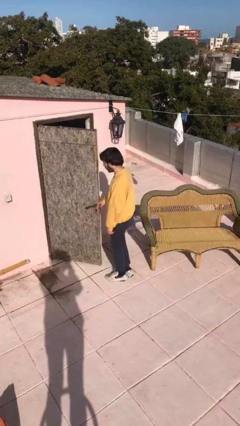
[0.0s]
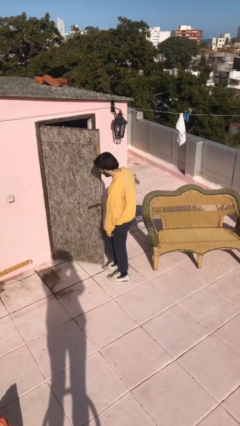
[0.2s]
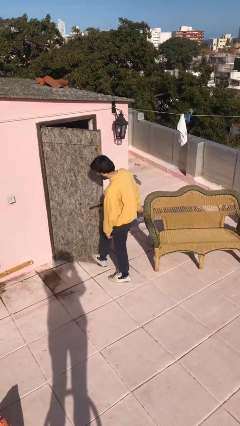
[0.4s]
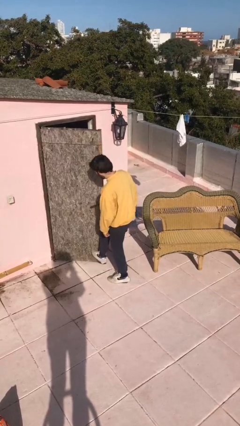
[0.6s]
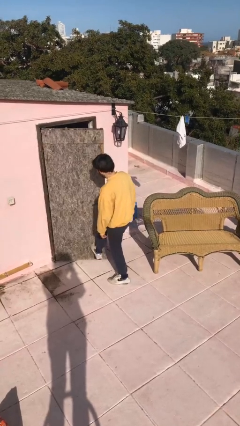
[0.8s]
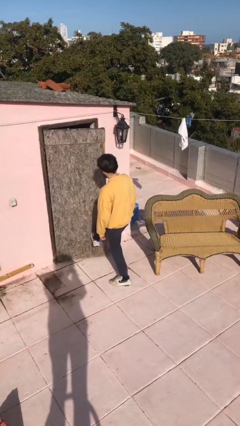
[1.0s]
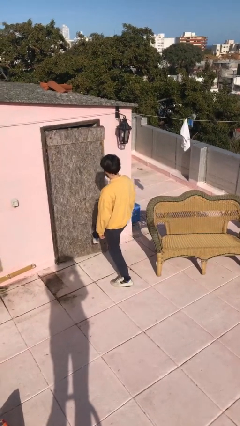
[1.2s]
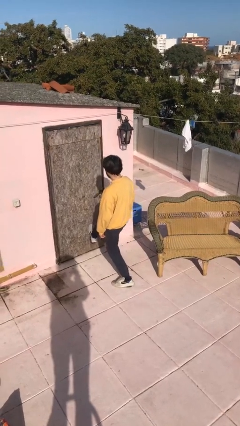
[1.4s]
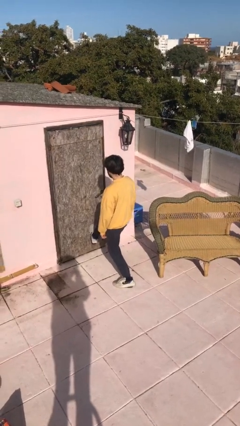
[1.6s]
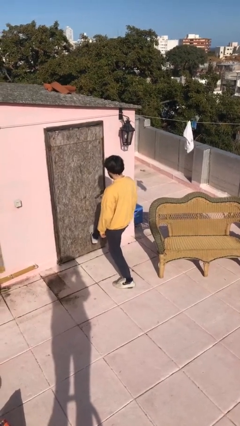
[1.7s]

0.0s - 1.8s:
person closes door with foot

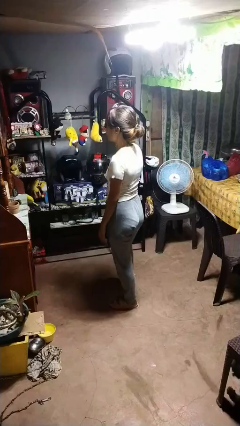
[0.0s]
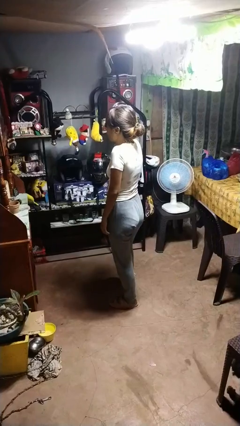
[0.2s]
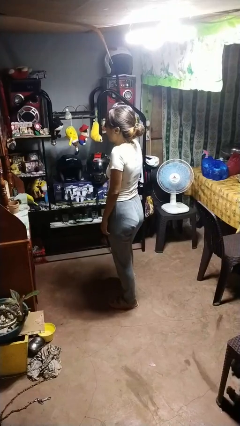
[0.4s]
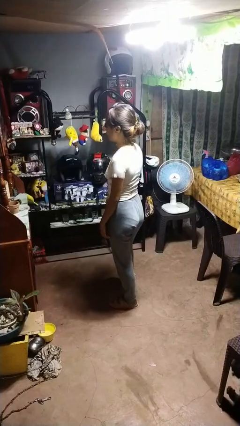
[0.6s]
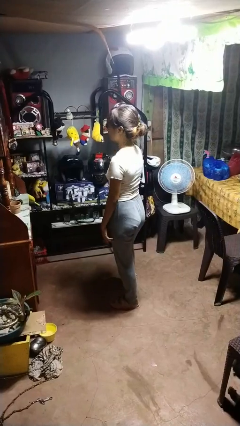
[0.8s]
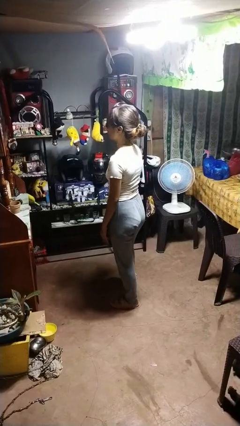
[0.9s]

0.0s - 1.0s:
person shrugs

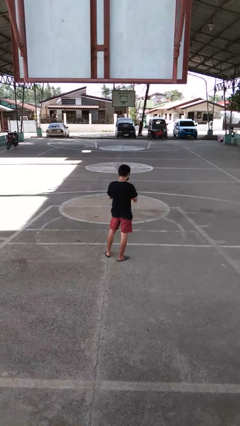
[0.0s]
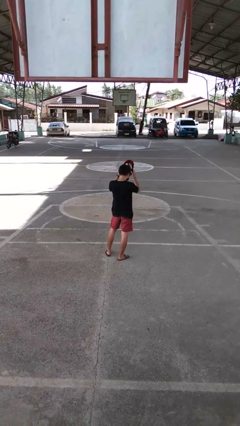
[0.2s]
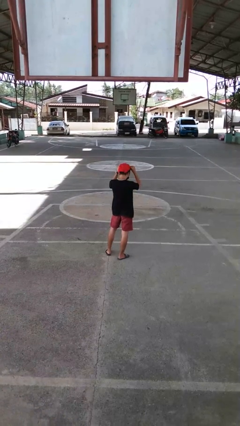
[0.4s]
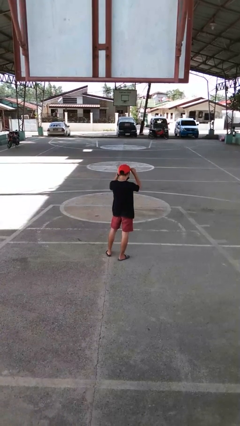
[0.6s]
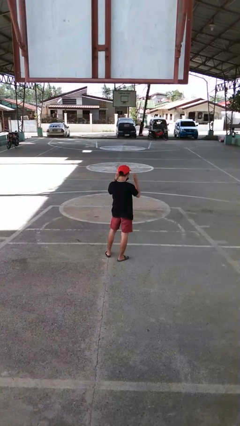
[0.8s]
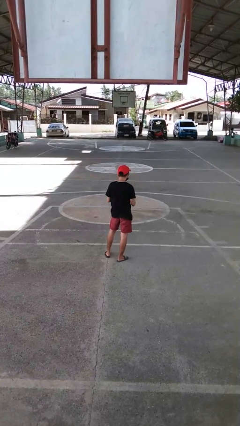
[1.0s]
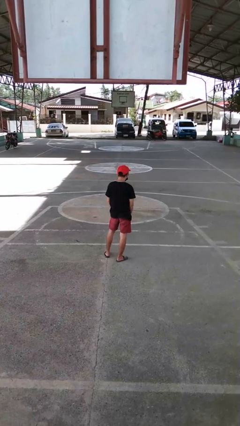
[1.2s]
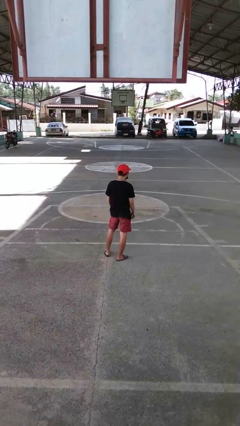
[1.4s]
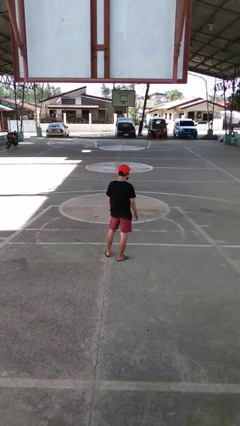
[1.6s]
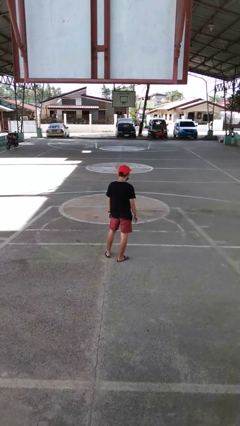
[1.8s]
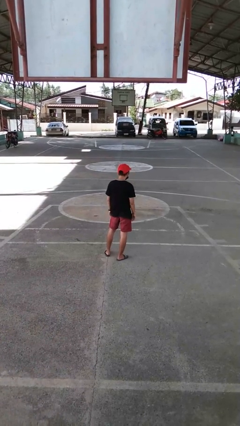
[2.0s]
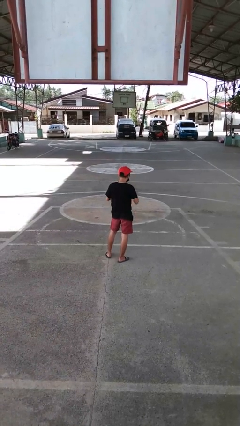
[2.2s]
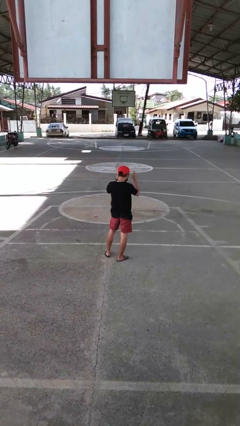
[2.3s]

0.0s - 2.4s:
person puts on hat

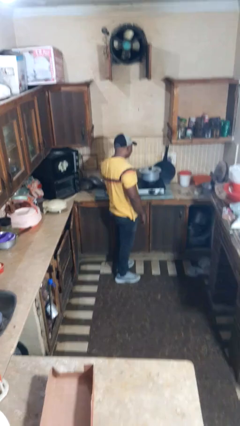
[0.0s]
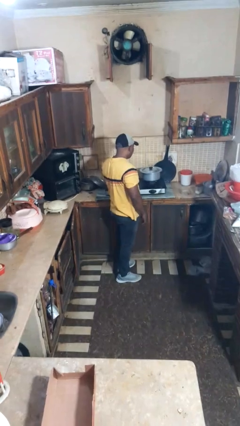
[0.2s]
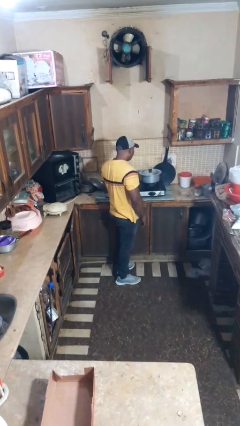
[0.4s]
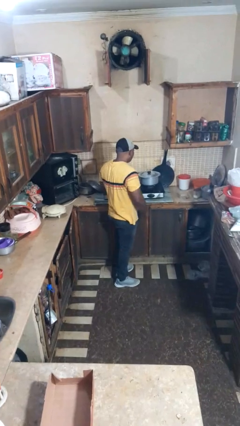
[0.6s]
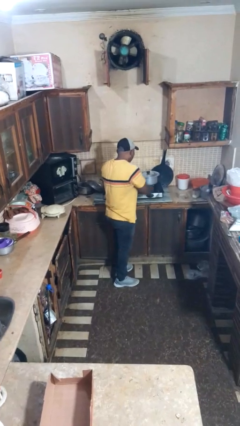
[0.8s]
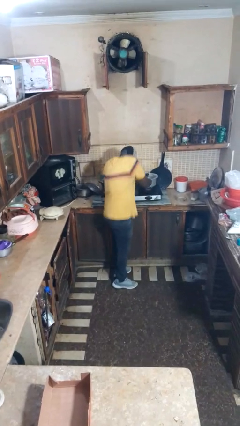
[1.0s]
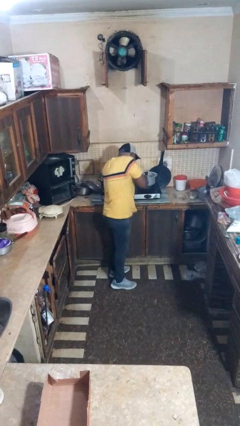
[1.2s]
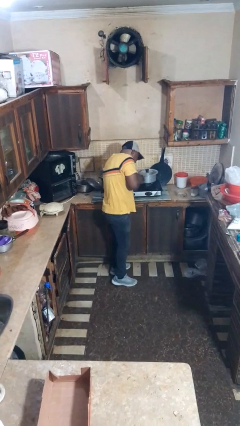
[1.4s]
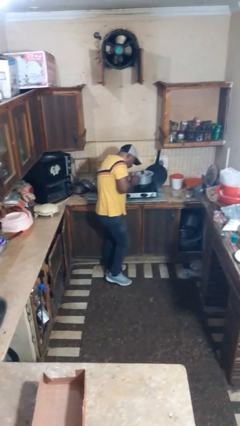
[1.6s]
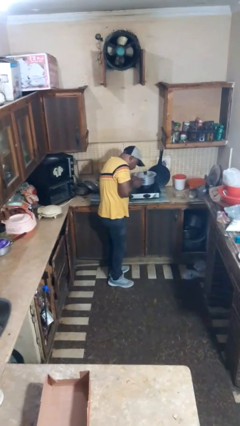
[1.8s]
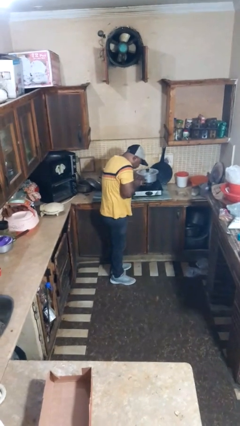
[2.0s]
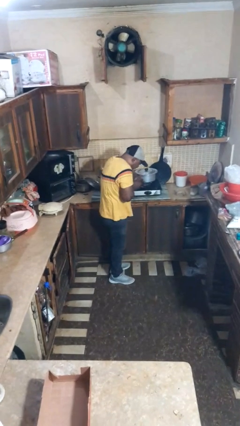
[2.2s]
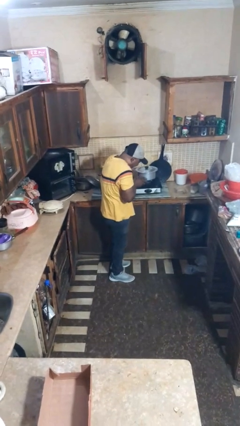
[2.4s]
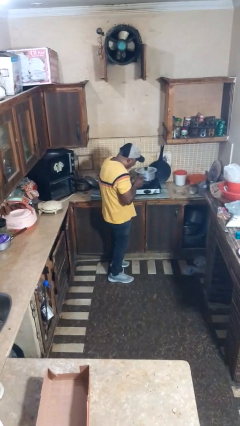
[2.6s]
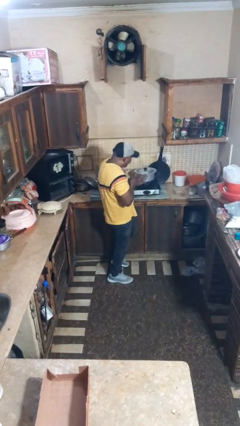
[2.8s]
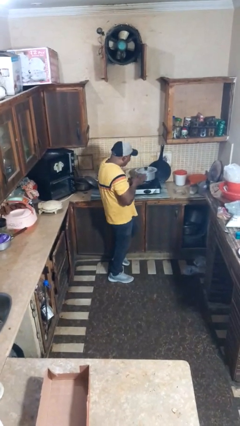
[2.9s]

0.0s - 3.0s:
person burns hand

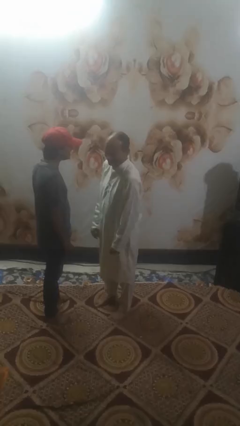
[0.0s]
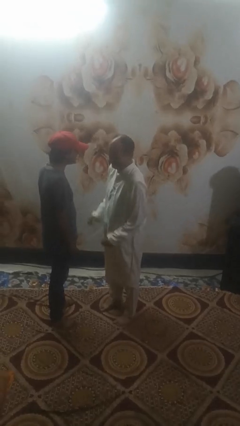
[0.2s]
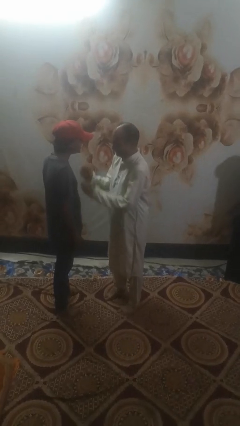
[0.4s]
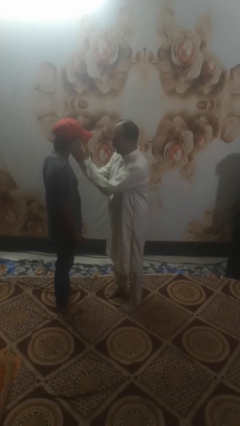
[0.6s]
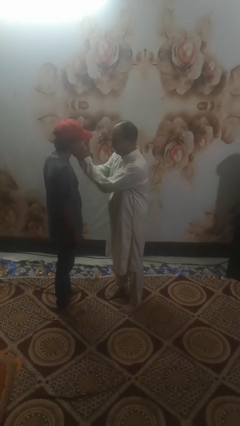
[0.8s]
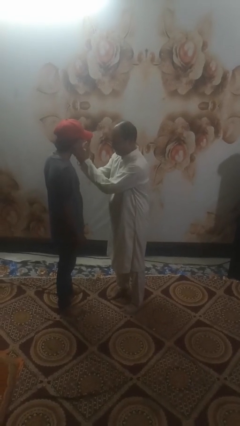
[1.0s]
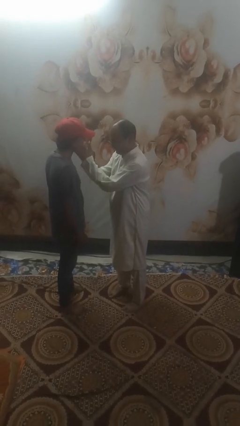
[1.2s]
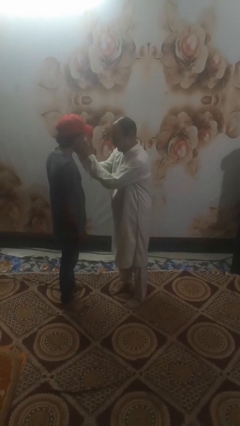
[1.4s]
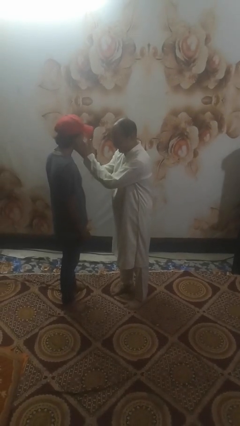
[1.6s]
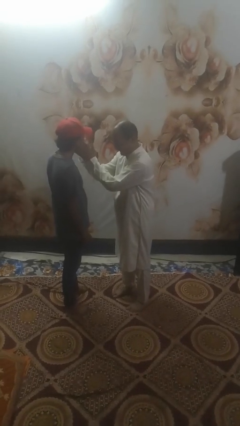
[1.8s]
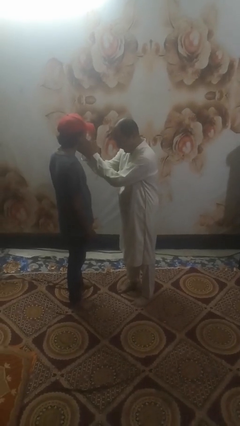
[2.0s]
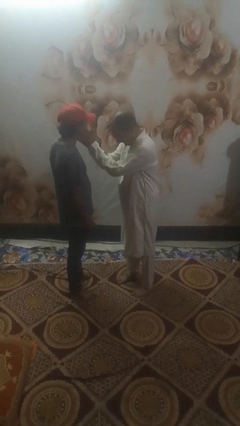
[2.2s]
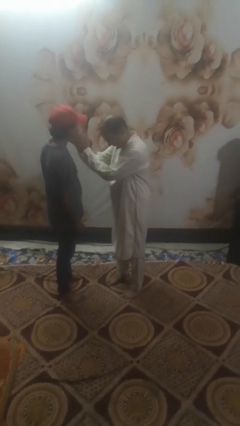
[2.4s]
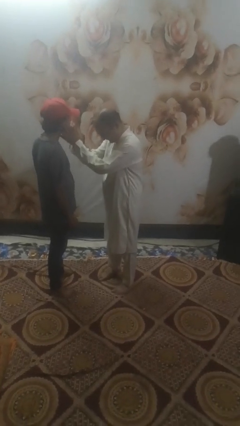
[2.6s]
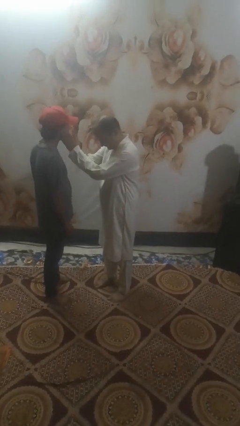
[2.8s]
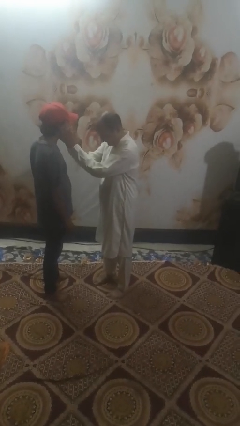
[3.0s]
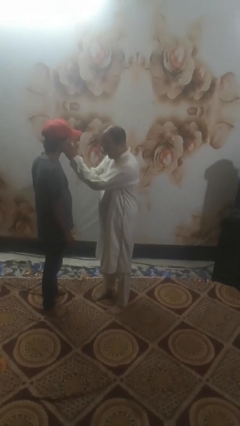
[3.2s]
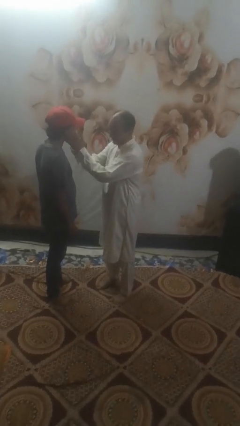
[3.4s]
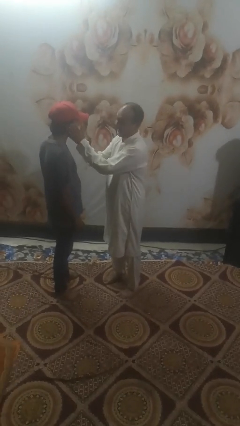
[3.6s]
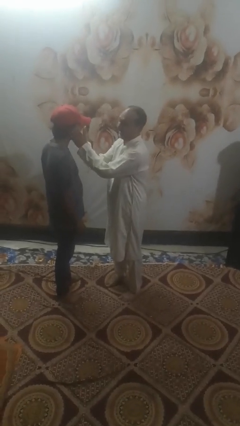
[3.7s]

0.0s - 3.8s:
person touches face of person

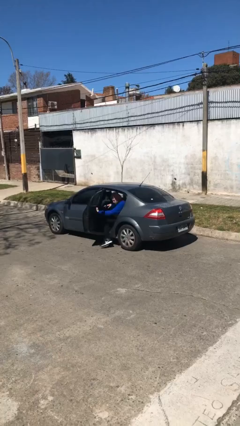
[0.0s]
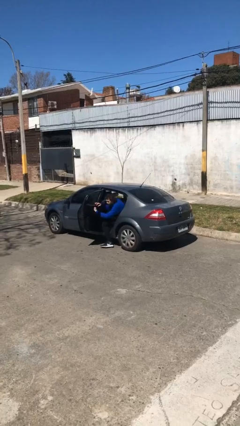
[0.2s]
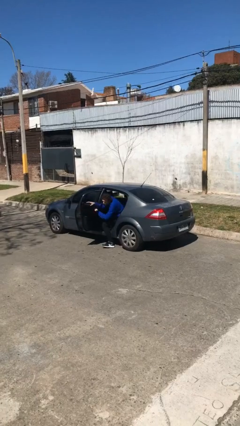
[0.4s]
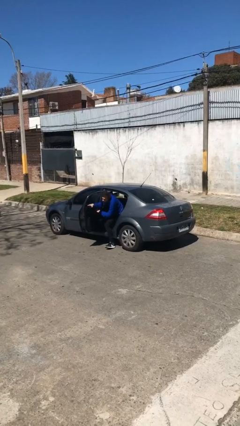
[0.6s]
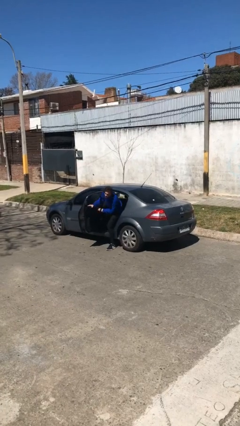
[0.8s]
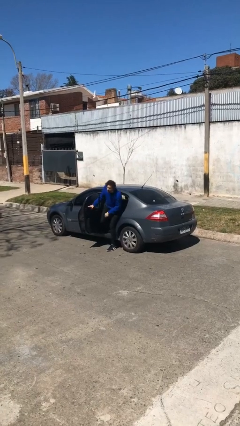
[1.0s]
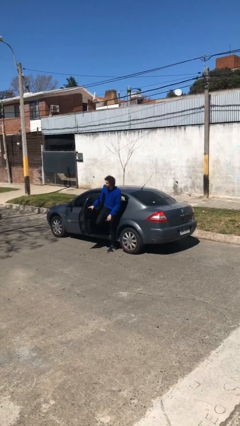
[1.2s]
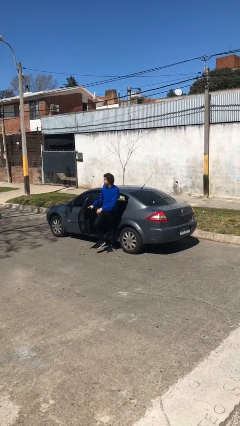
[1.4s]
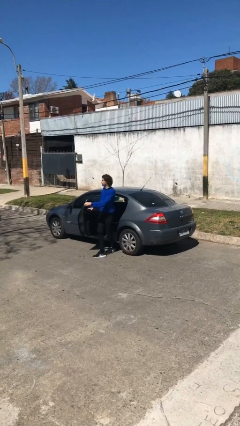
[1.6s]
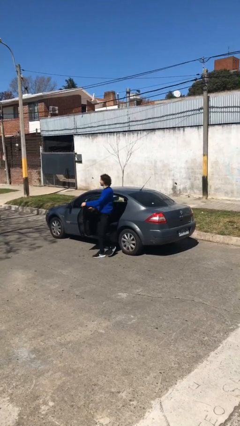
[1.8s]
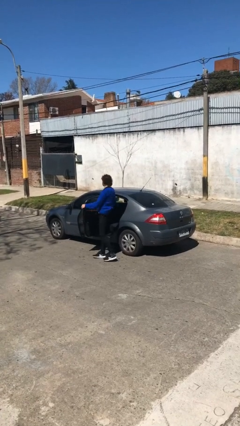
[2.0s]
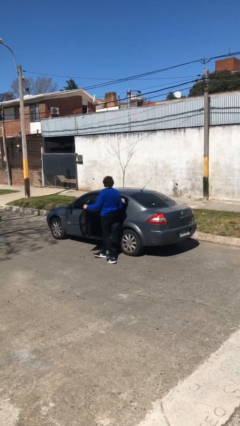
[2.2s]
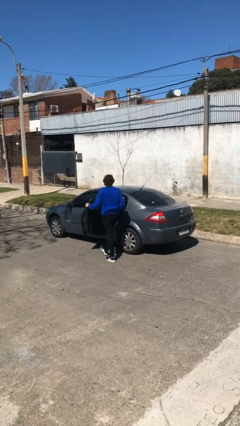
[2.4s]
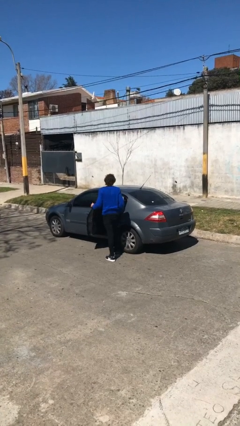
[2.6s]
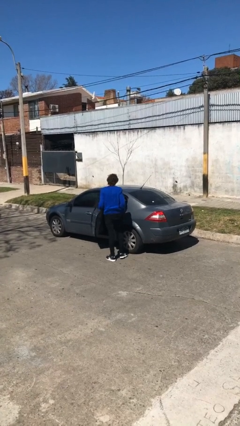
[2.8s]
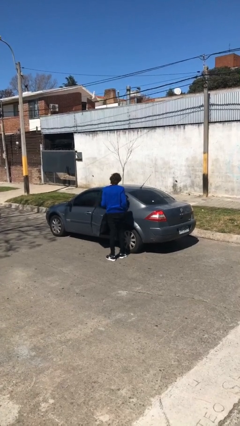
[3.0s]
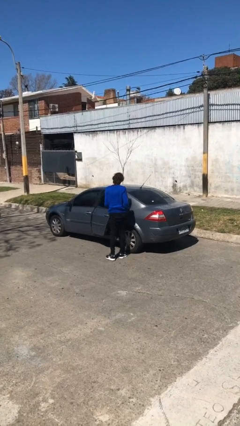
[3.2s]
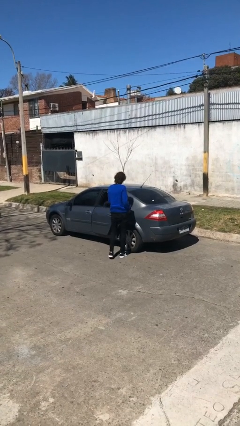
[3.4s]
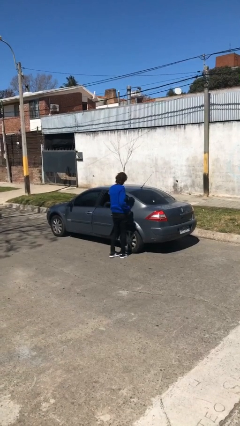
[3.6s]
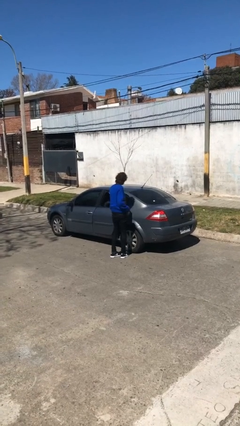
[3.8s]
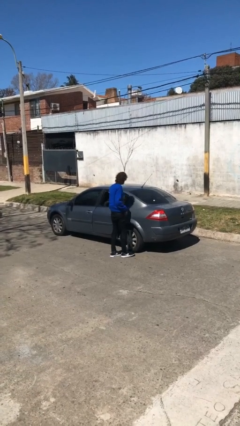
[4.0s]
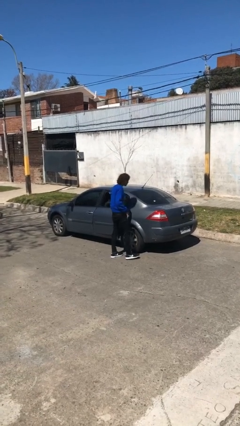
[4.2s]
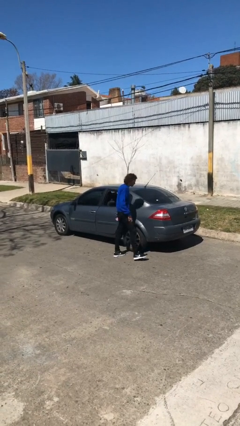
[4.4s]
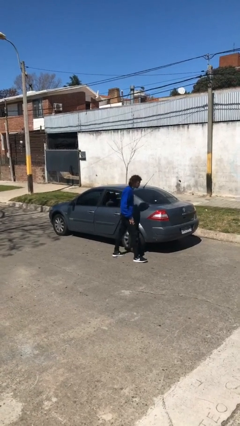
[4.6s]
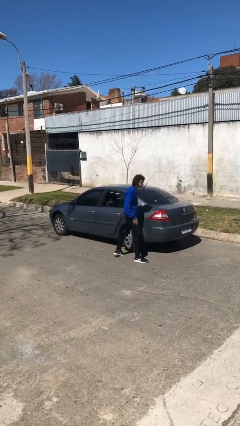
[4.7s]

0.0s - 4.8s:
car drops off person

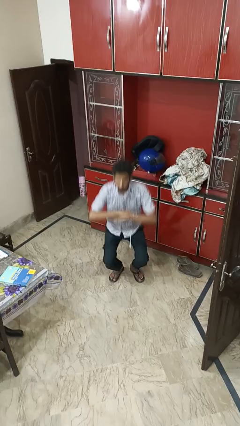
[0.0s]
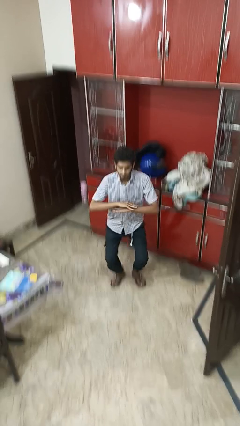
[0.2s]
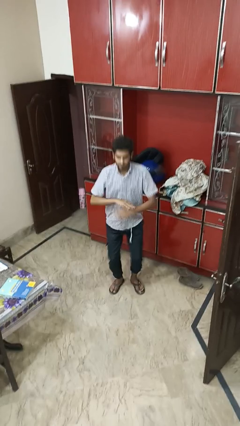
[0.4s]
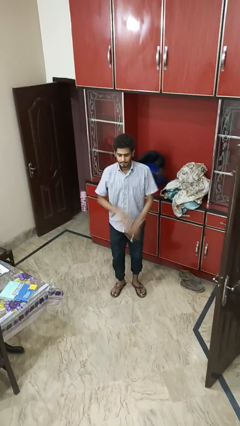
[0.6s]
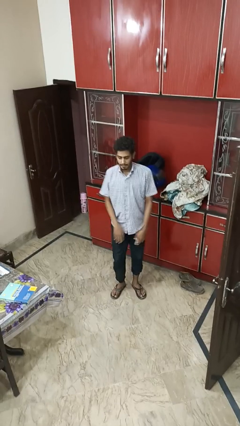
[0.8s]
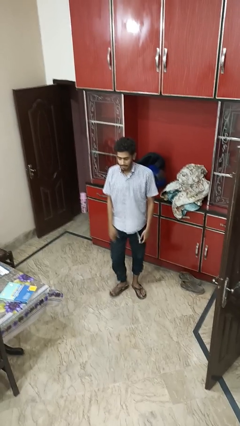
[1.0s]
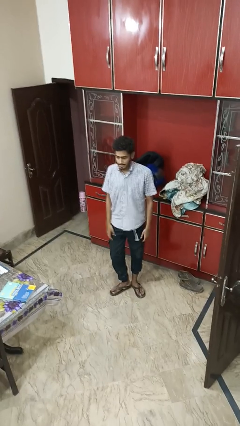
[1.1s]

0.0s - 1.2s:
person stands up
